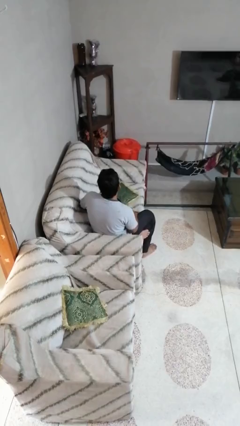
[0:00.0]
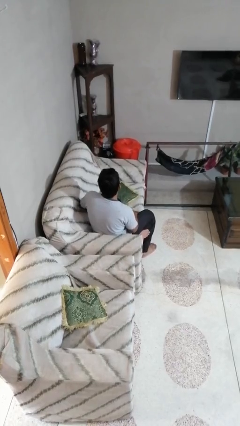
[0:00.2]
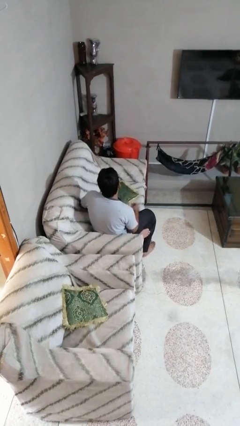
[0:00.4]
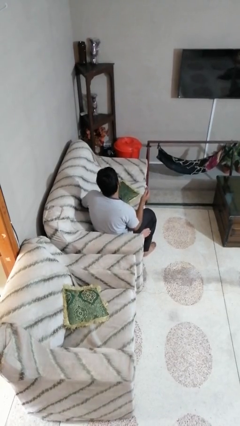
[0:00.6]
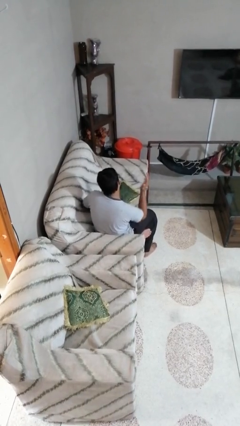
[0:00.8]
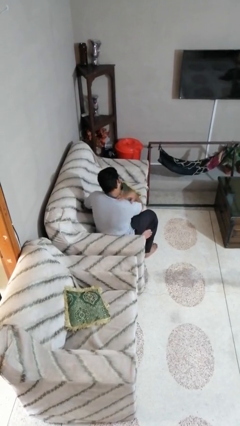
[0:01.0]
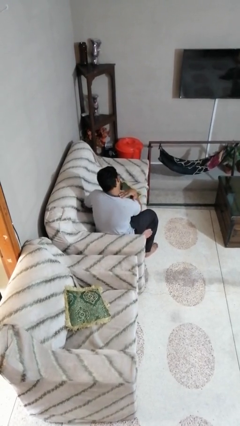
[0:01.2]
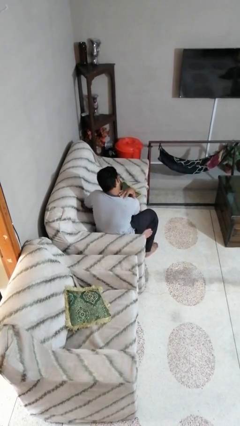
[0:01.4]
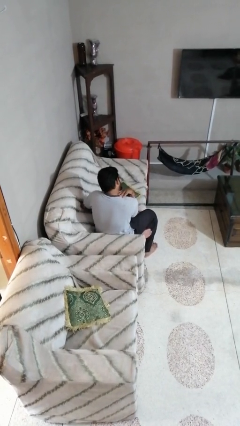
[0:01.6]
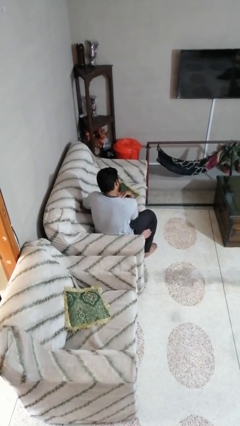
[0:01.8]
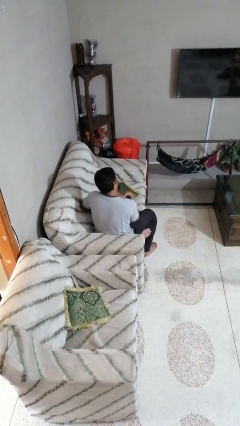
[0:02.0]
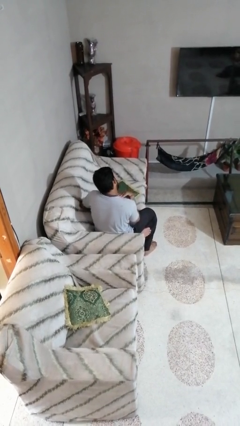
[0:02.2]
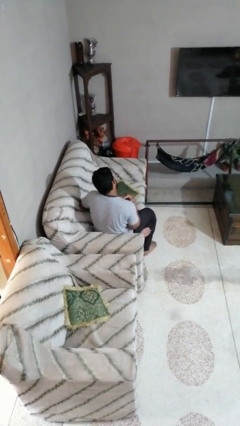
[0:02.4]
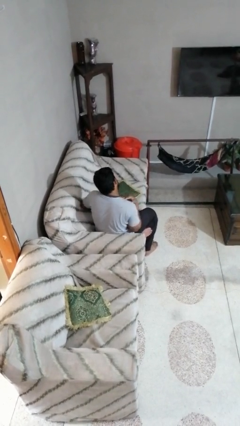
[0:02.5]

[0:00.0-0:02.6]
person swats bug

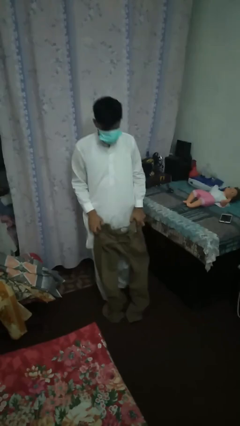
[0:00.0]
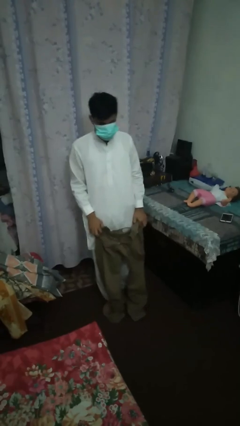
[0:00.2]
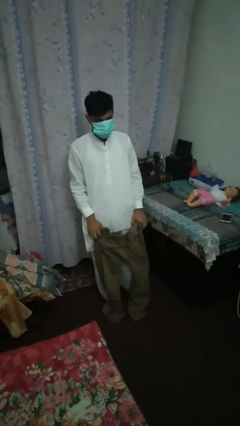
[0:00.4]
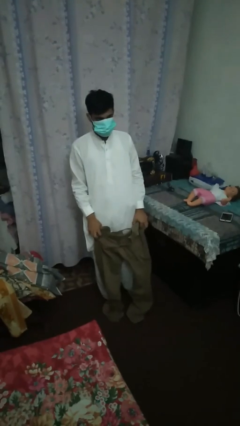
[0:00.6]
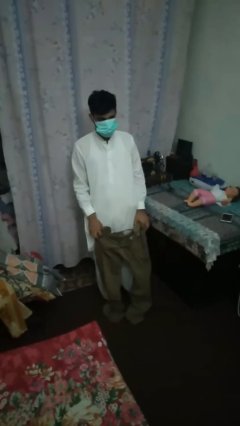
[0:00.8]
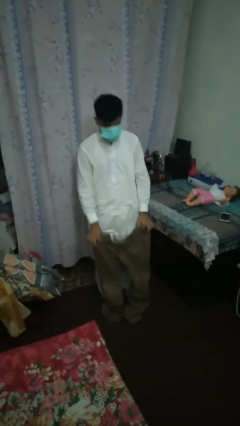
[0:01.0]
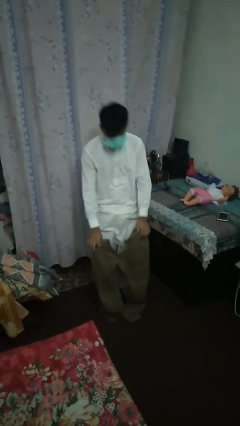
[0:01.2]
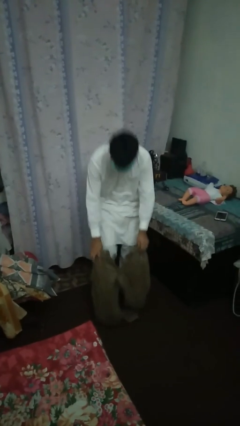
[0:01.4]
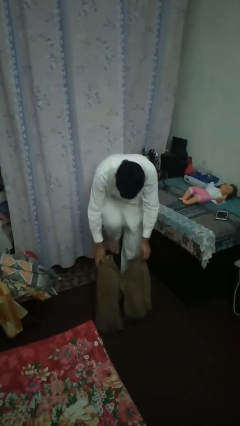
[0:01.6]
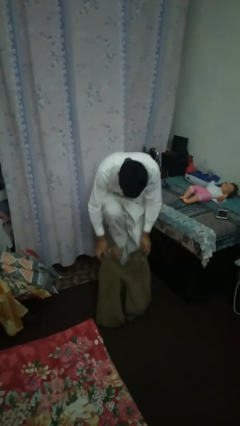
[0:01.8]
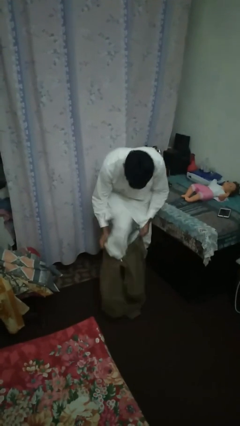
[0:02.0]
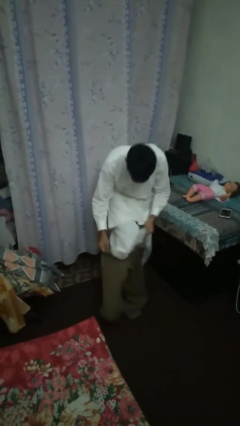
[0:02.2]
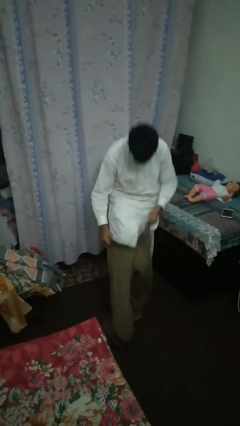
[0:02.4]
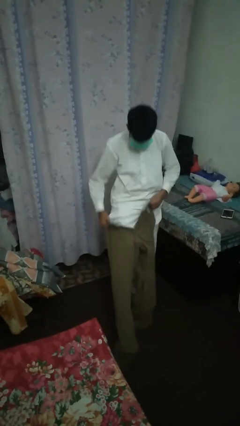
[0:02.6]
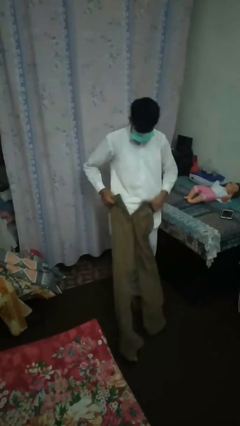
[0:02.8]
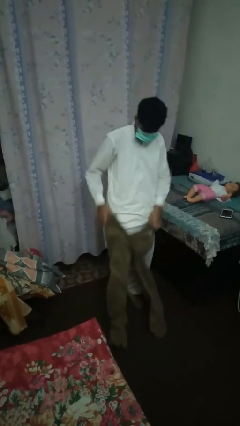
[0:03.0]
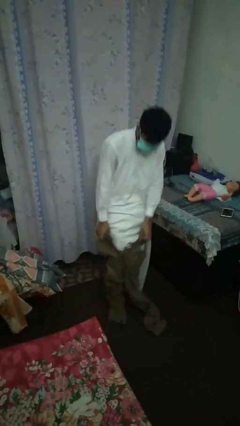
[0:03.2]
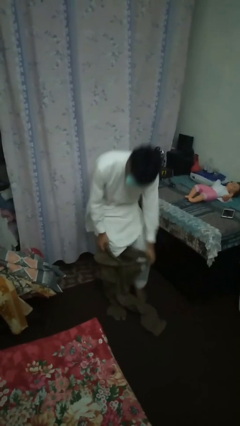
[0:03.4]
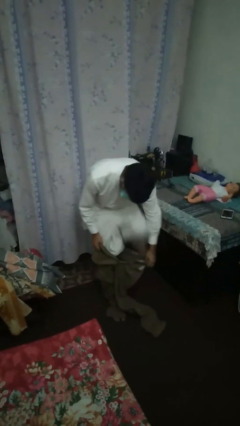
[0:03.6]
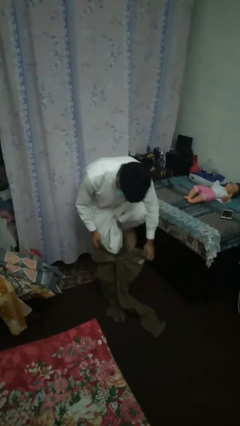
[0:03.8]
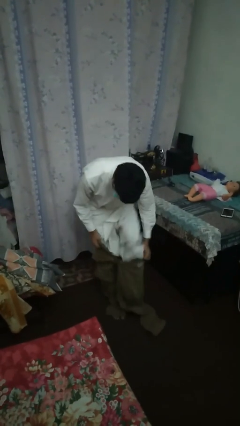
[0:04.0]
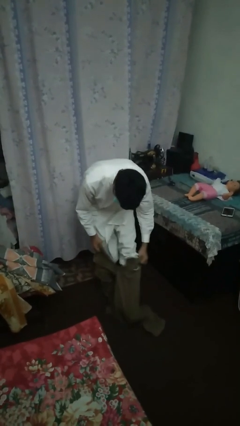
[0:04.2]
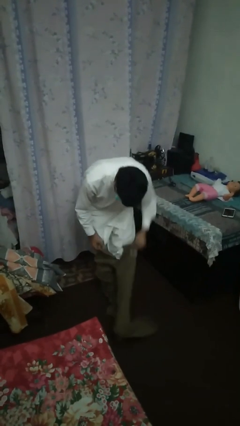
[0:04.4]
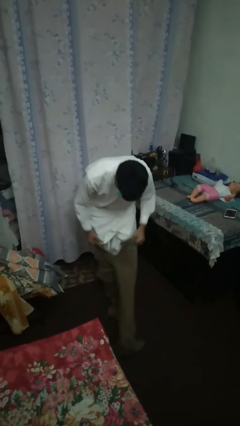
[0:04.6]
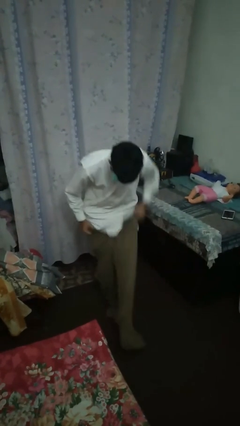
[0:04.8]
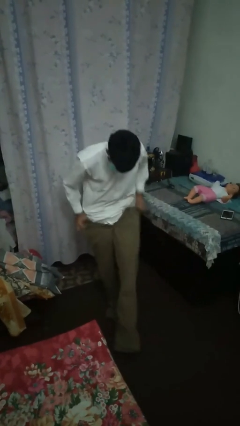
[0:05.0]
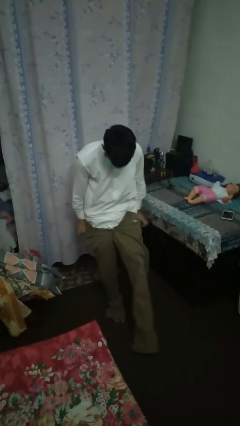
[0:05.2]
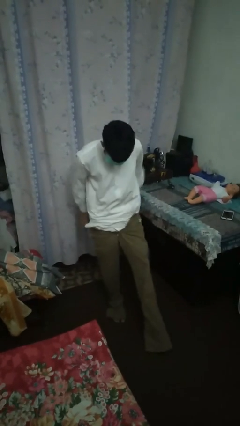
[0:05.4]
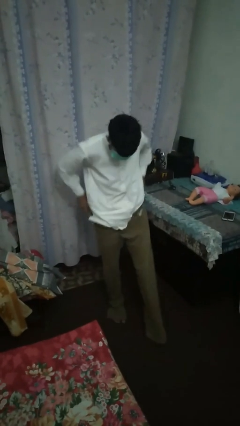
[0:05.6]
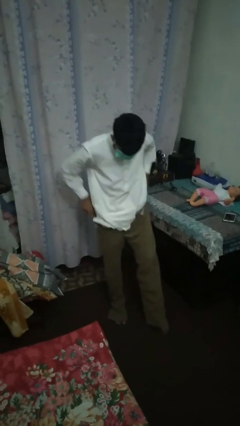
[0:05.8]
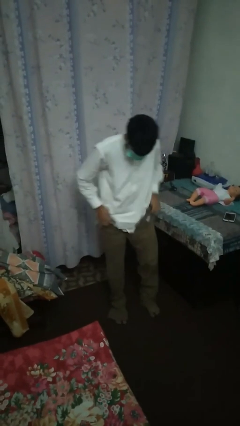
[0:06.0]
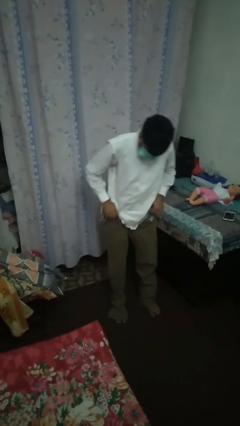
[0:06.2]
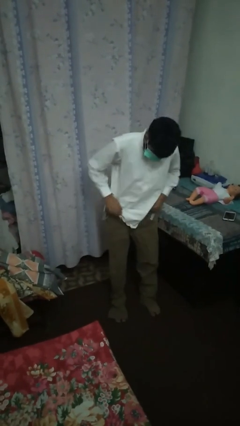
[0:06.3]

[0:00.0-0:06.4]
person puts on pants

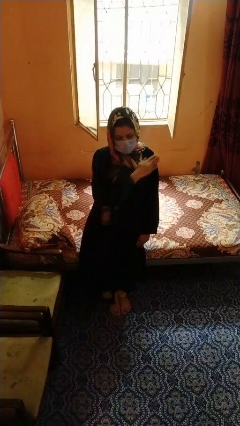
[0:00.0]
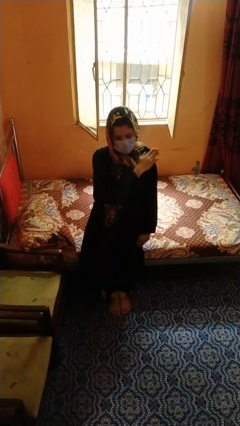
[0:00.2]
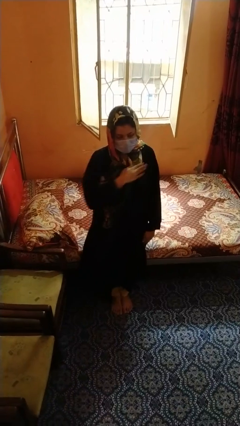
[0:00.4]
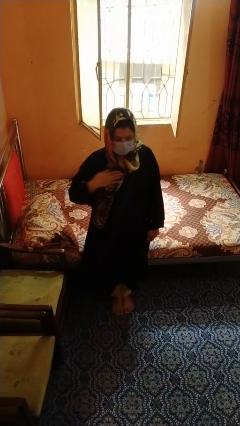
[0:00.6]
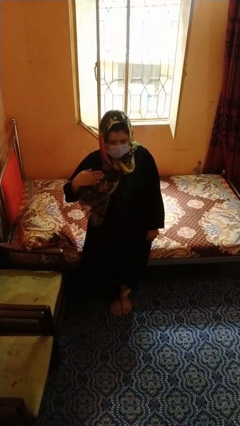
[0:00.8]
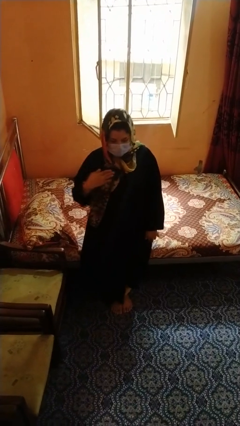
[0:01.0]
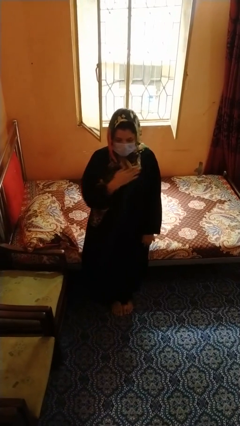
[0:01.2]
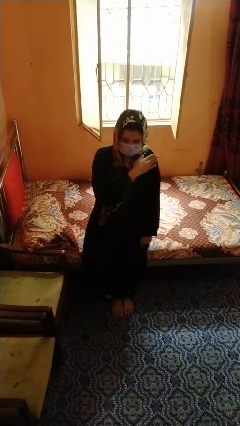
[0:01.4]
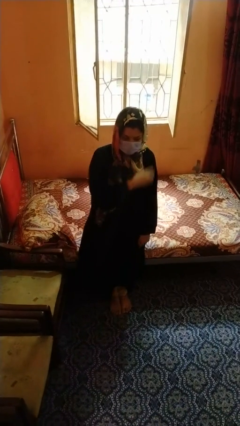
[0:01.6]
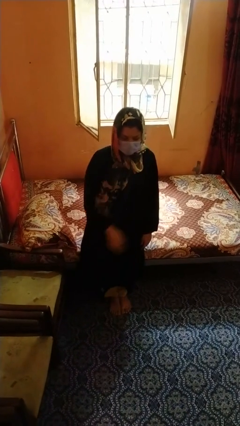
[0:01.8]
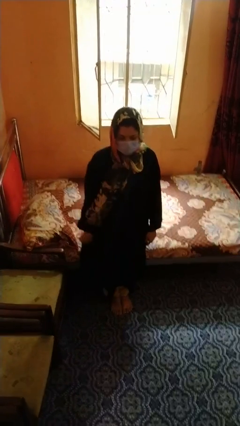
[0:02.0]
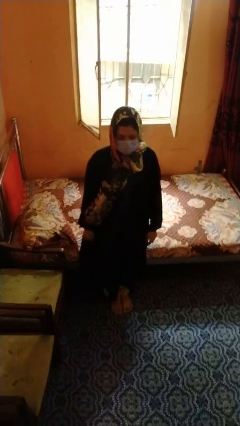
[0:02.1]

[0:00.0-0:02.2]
person gestures cut

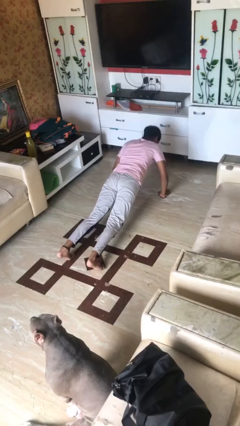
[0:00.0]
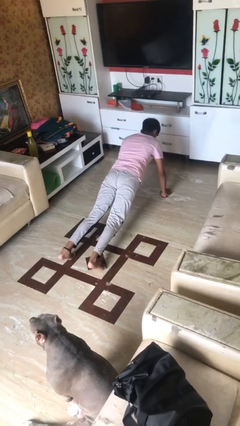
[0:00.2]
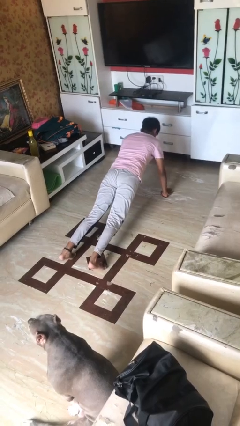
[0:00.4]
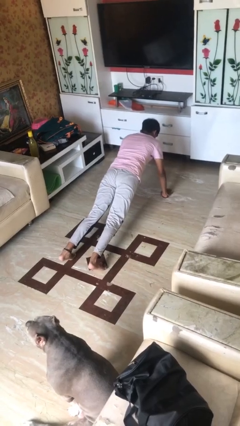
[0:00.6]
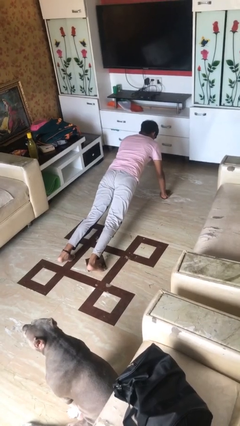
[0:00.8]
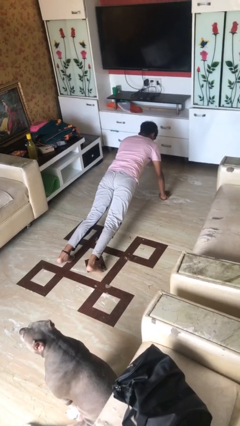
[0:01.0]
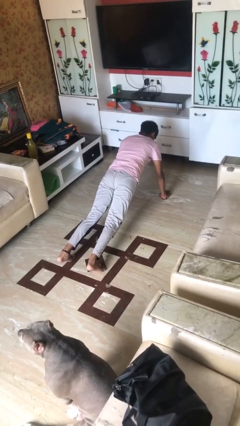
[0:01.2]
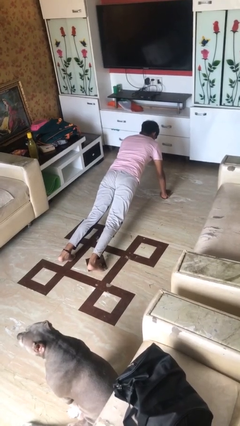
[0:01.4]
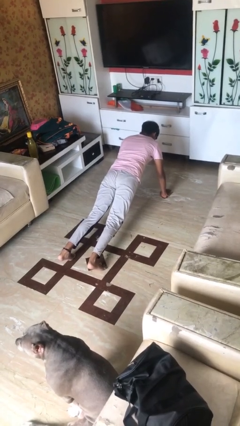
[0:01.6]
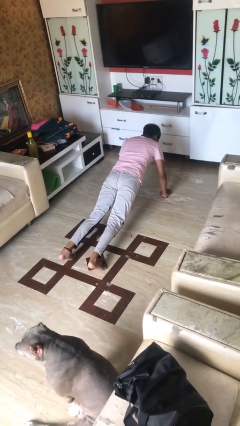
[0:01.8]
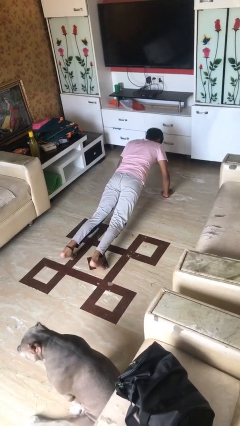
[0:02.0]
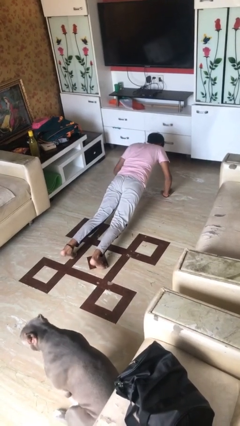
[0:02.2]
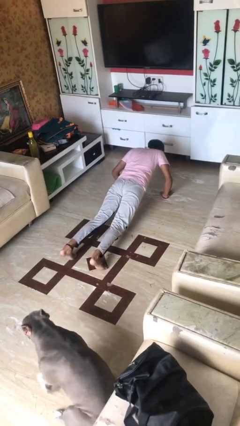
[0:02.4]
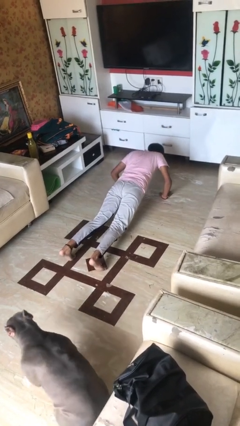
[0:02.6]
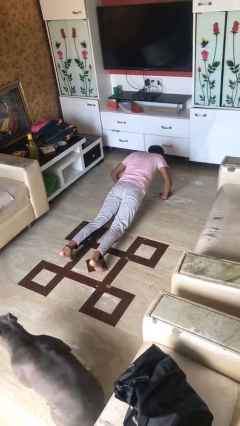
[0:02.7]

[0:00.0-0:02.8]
person exercises with pushup

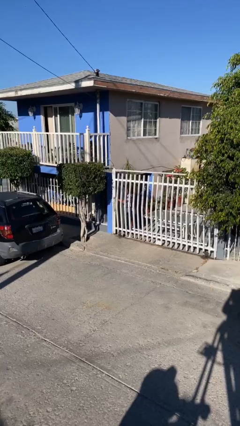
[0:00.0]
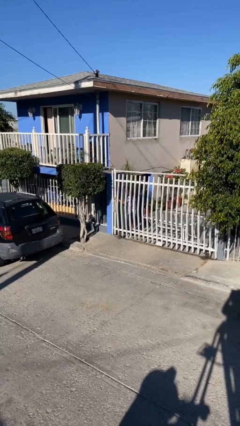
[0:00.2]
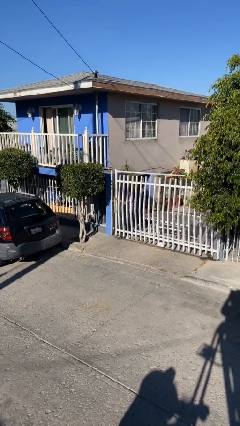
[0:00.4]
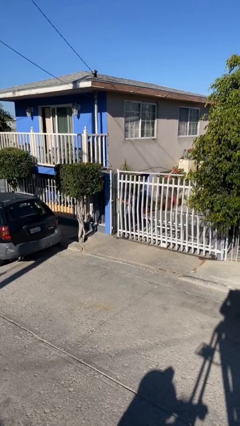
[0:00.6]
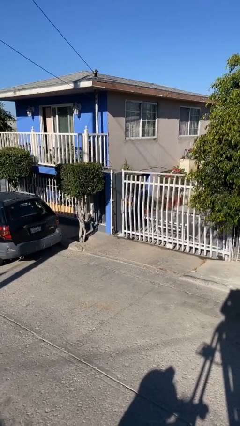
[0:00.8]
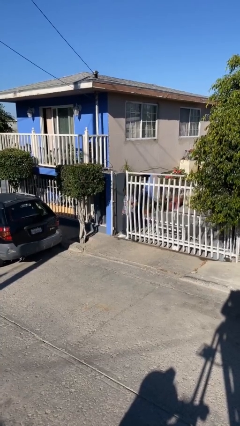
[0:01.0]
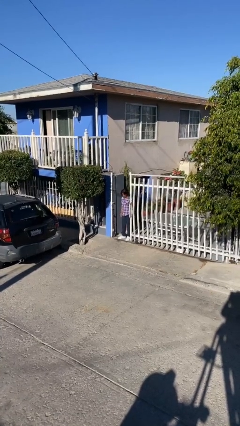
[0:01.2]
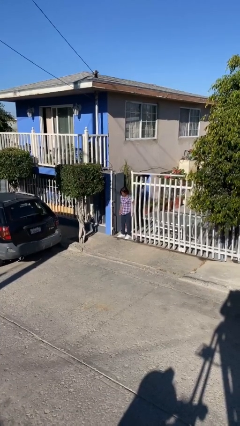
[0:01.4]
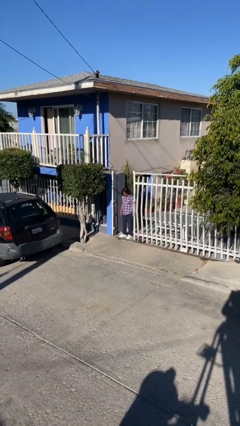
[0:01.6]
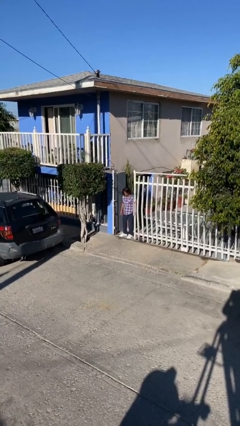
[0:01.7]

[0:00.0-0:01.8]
person opens facility door

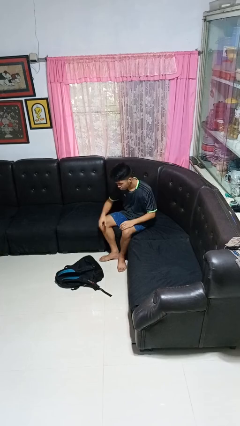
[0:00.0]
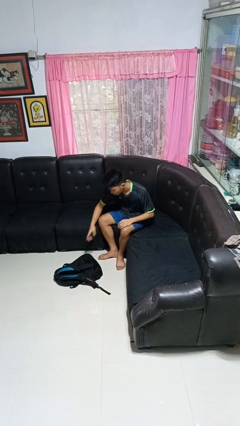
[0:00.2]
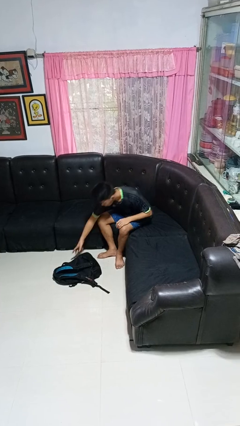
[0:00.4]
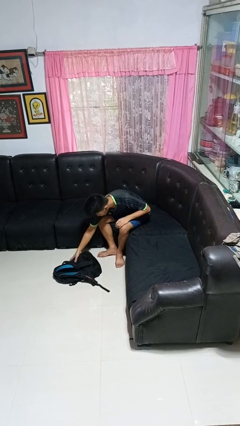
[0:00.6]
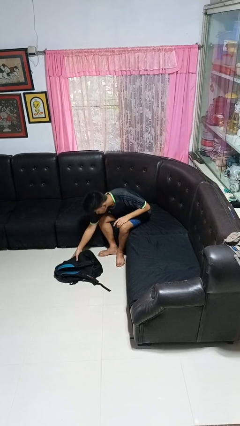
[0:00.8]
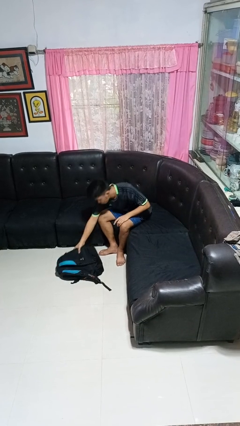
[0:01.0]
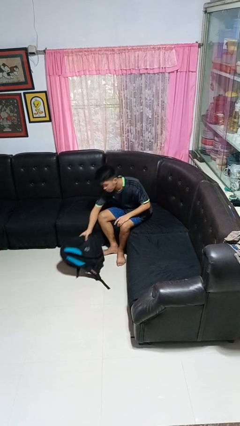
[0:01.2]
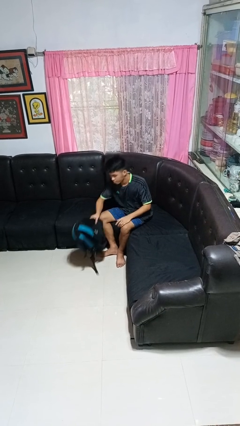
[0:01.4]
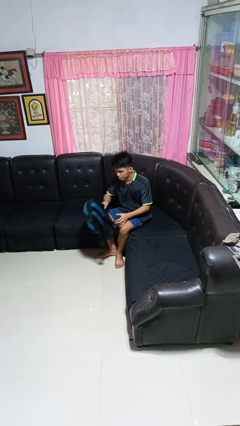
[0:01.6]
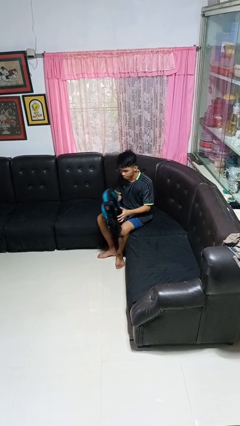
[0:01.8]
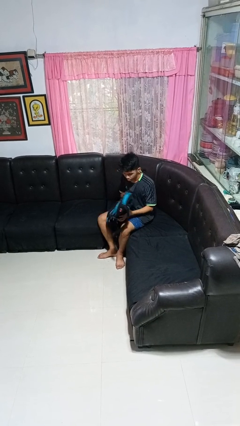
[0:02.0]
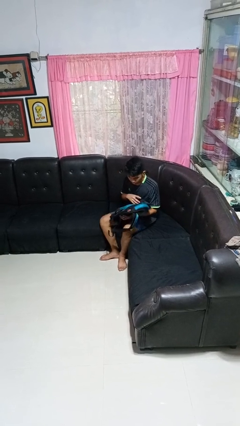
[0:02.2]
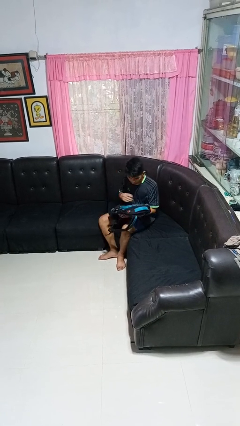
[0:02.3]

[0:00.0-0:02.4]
person picks up object from floor
